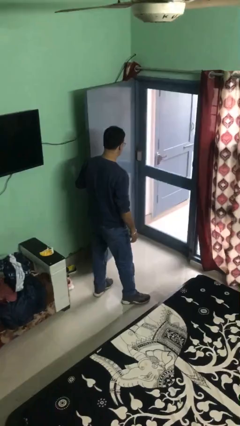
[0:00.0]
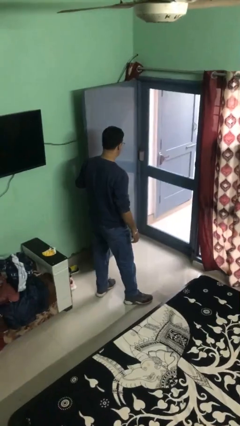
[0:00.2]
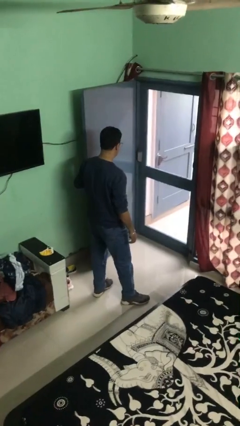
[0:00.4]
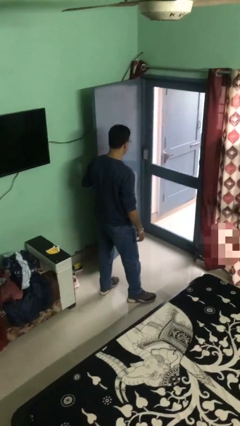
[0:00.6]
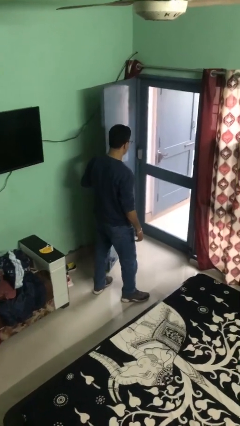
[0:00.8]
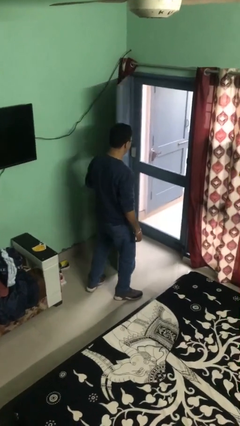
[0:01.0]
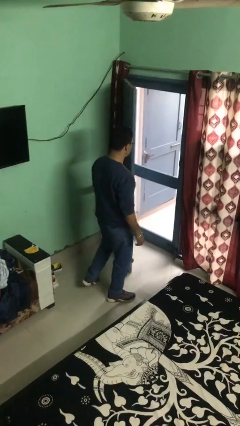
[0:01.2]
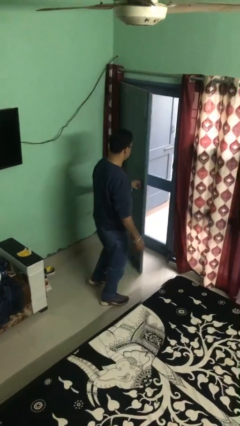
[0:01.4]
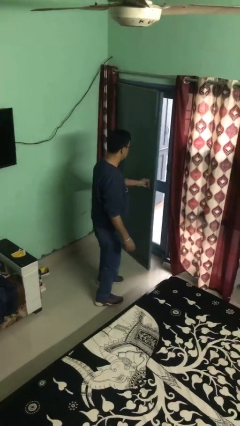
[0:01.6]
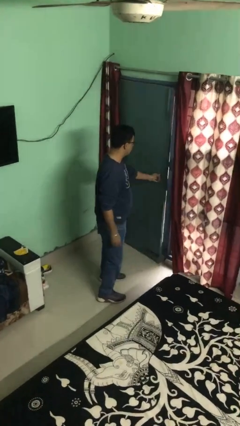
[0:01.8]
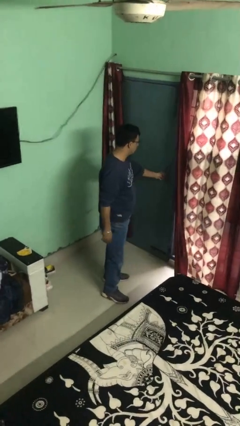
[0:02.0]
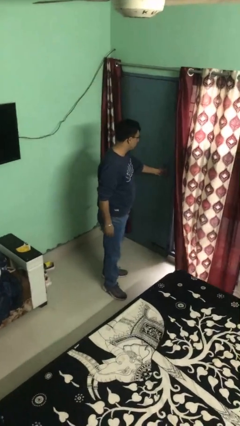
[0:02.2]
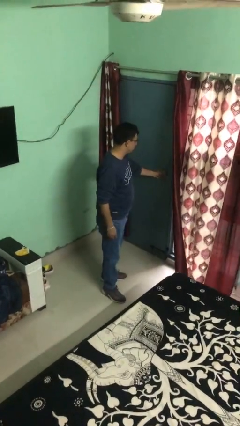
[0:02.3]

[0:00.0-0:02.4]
person closes facility door

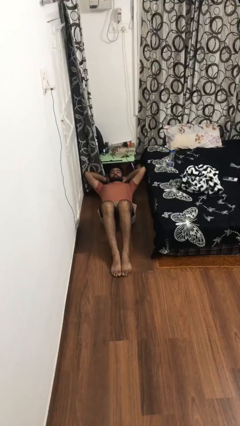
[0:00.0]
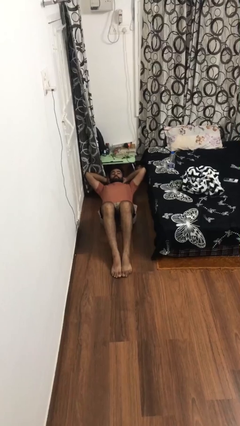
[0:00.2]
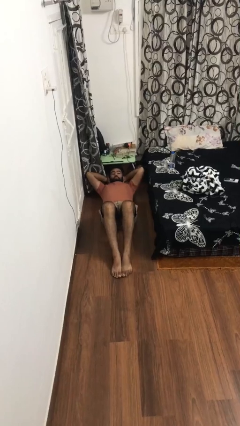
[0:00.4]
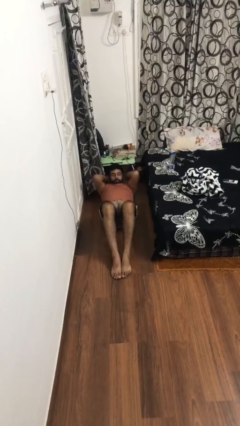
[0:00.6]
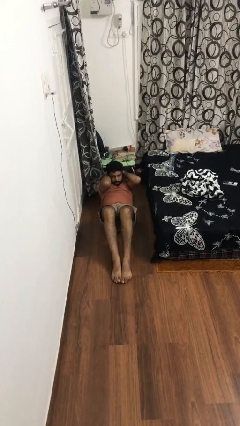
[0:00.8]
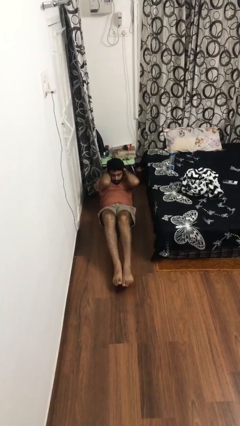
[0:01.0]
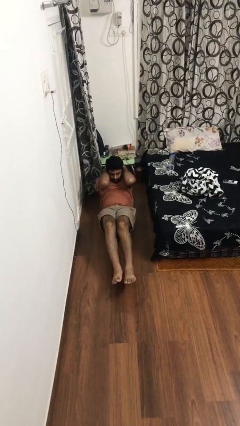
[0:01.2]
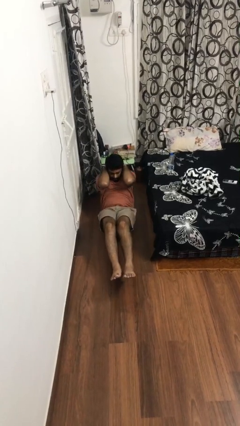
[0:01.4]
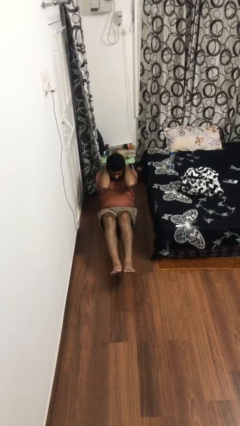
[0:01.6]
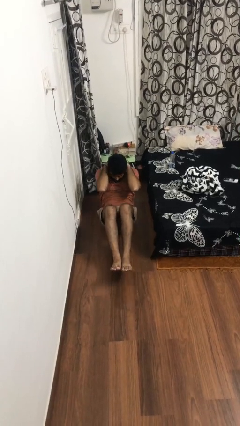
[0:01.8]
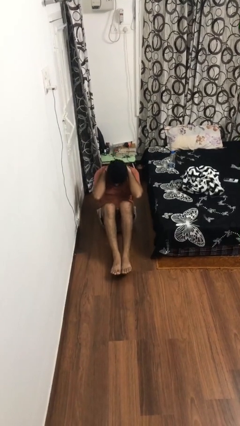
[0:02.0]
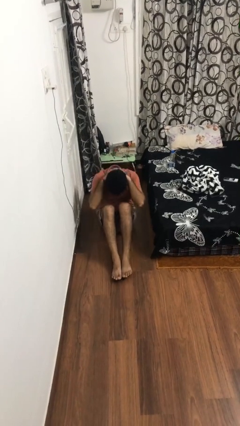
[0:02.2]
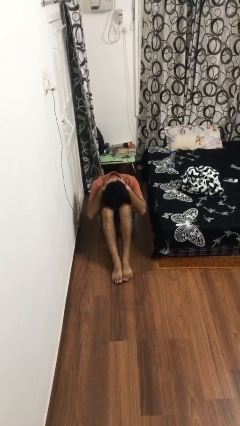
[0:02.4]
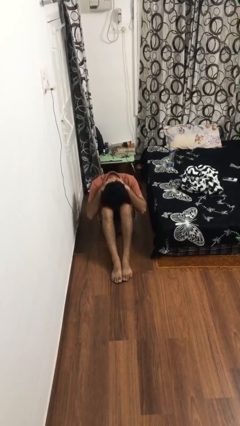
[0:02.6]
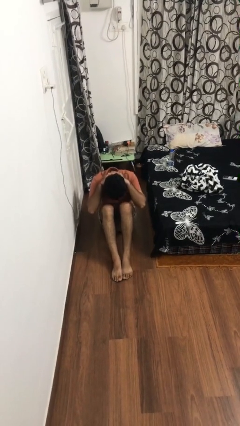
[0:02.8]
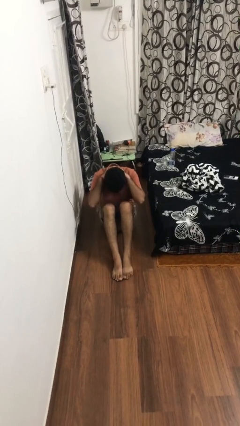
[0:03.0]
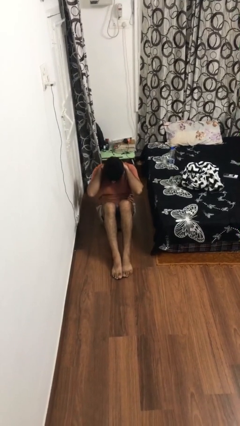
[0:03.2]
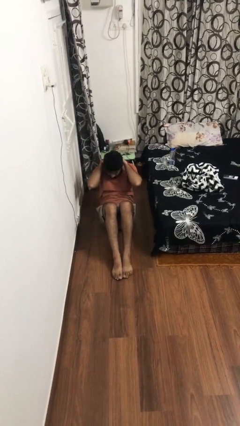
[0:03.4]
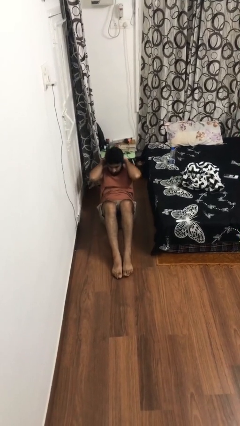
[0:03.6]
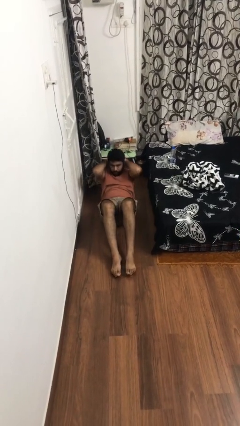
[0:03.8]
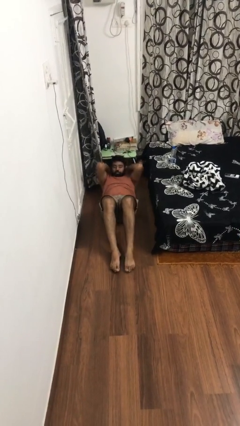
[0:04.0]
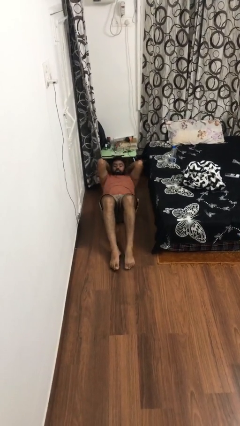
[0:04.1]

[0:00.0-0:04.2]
person exercises with situp

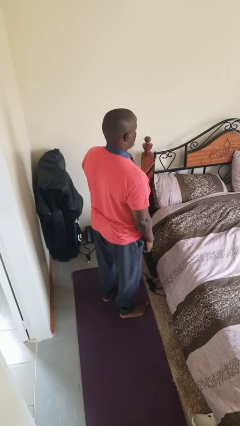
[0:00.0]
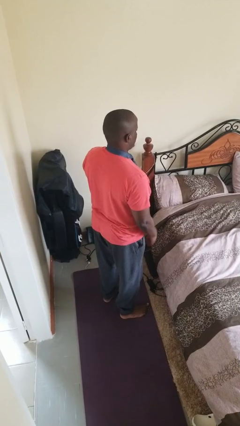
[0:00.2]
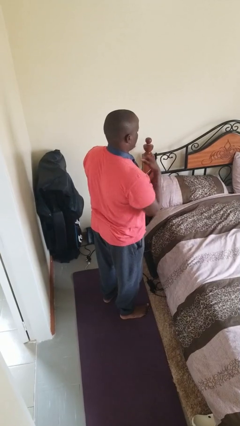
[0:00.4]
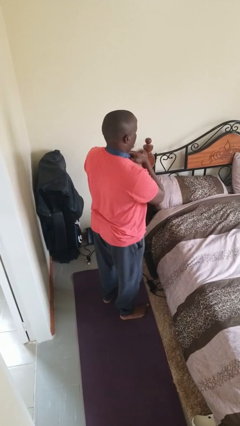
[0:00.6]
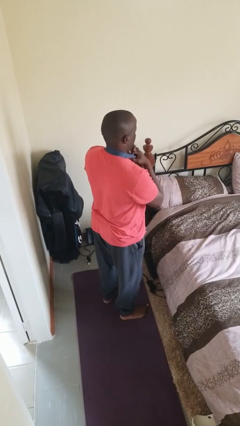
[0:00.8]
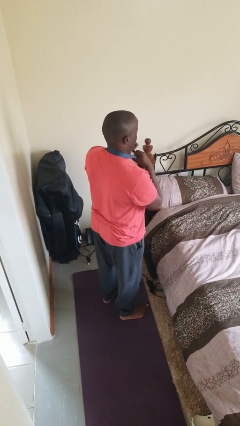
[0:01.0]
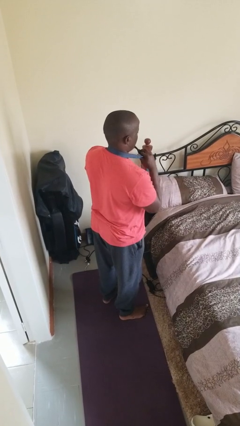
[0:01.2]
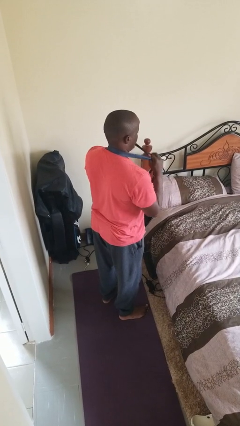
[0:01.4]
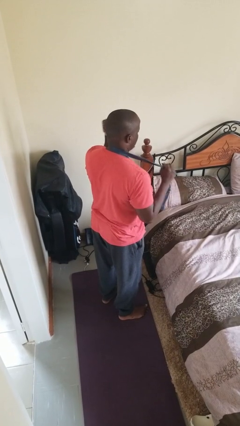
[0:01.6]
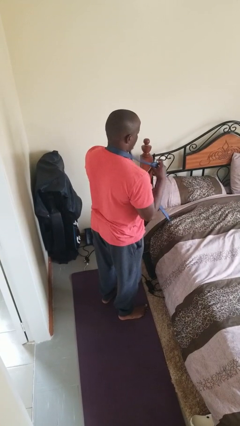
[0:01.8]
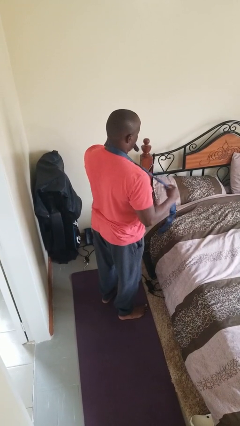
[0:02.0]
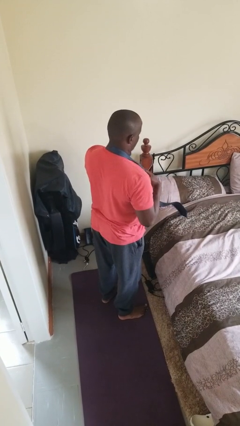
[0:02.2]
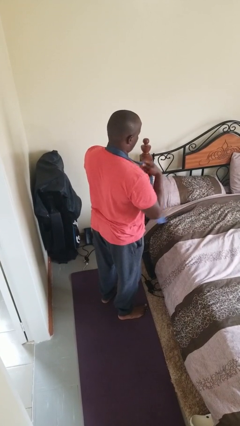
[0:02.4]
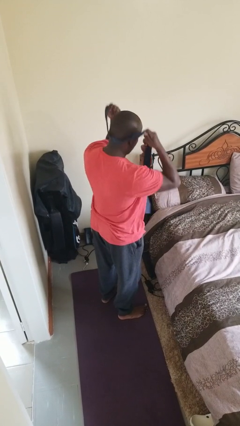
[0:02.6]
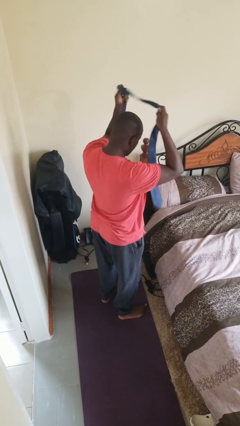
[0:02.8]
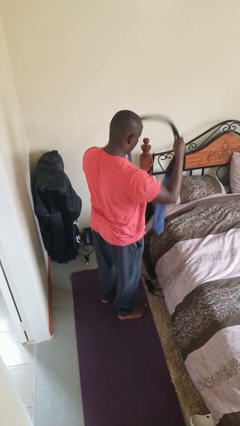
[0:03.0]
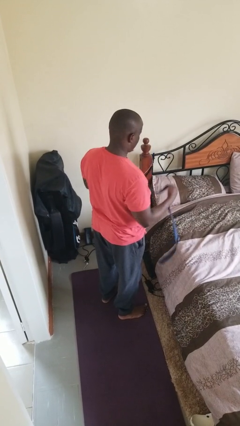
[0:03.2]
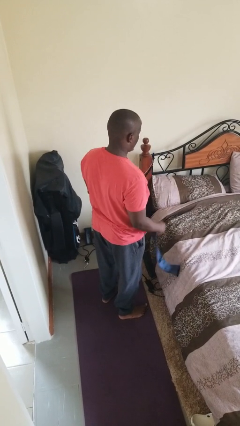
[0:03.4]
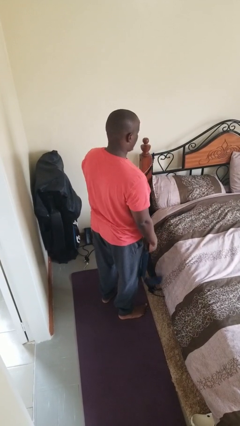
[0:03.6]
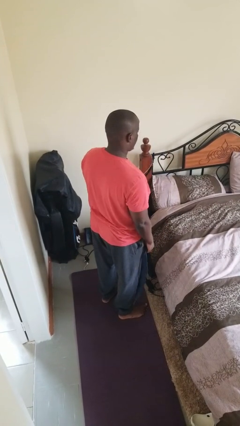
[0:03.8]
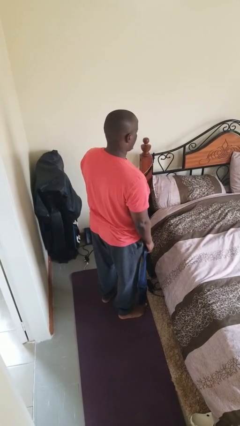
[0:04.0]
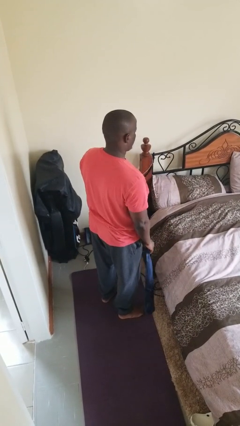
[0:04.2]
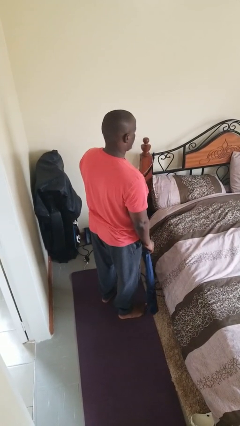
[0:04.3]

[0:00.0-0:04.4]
person takes off necktie

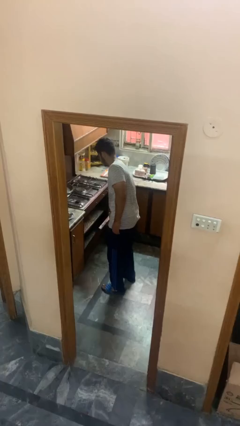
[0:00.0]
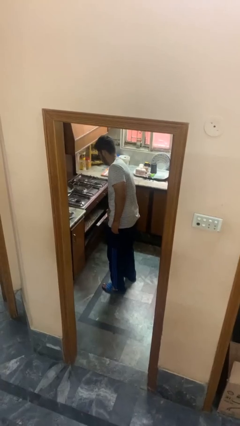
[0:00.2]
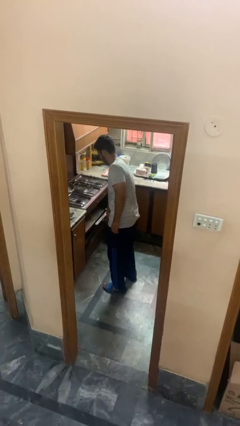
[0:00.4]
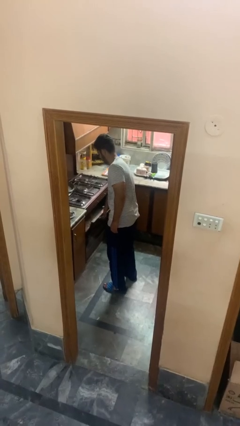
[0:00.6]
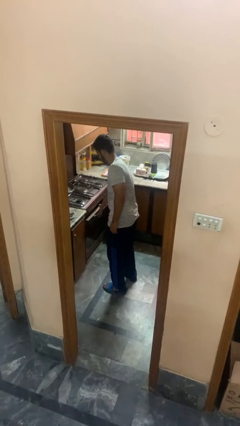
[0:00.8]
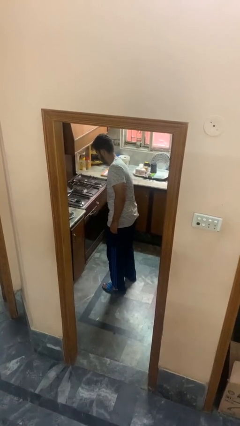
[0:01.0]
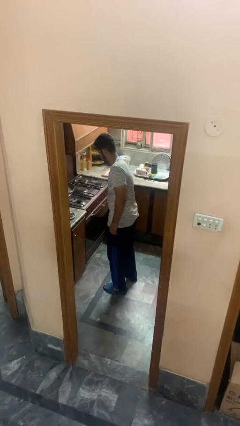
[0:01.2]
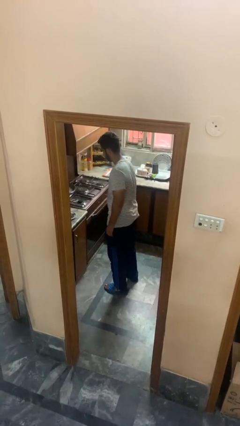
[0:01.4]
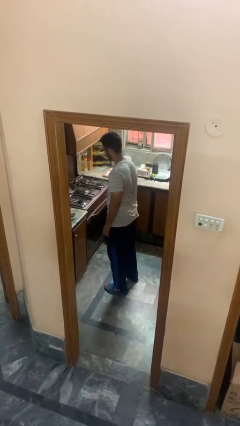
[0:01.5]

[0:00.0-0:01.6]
person closes oven door

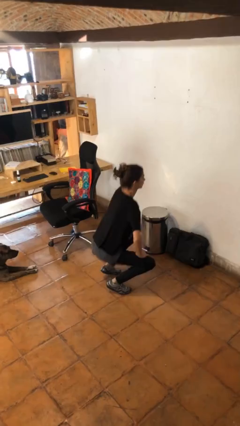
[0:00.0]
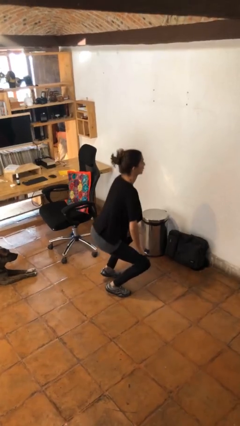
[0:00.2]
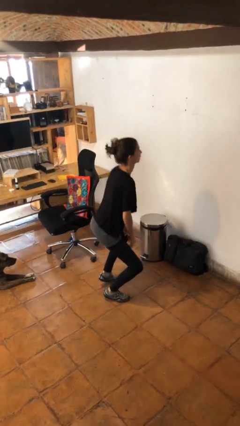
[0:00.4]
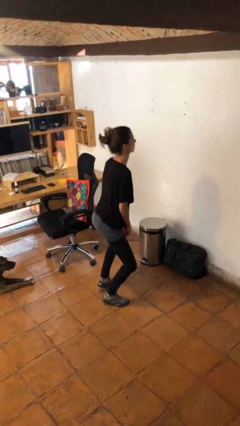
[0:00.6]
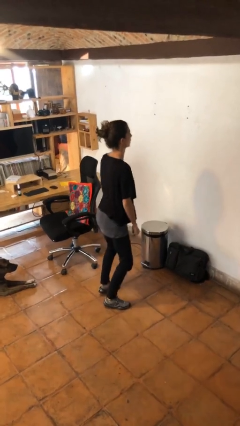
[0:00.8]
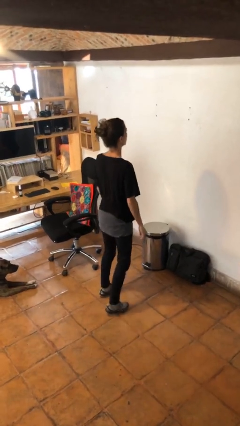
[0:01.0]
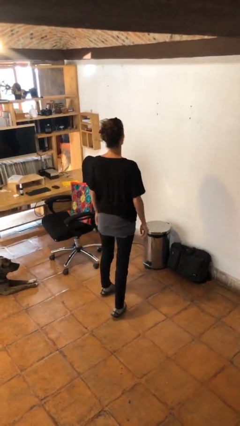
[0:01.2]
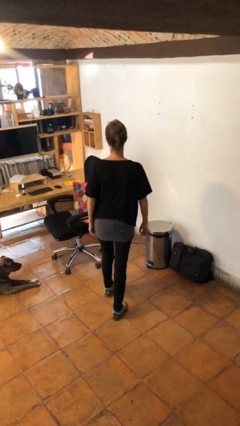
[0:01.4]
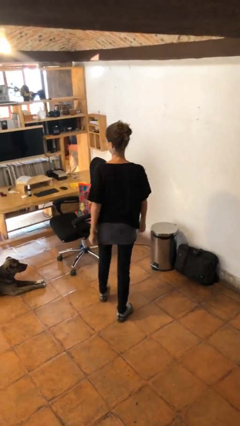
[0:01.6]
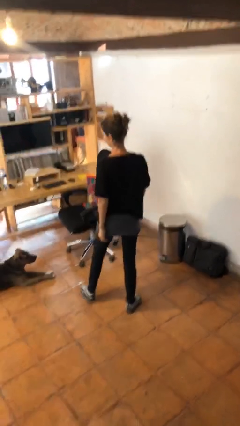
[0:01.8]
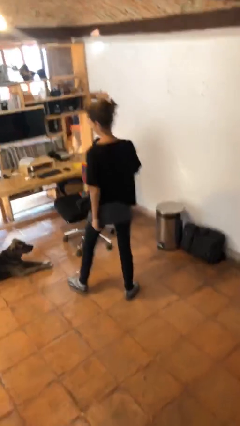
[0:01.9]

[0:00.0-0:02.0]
person stands up

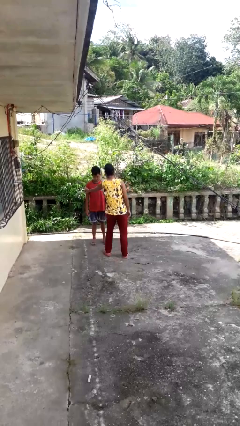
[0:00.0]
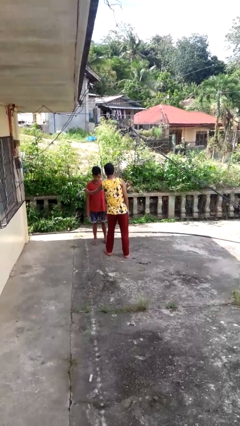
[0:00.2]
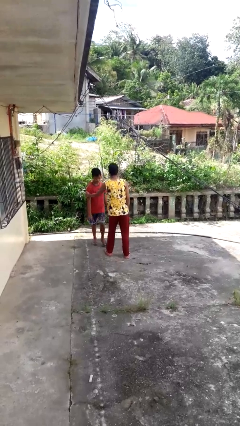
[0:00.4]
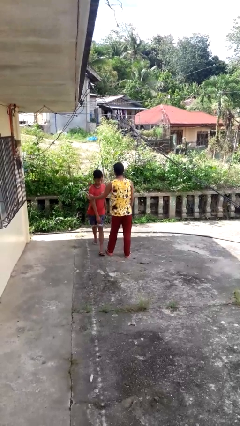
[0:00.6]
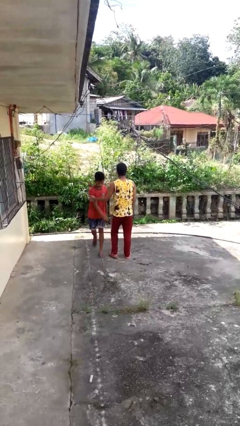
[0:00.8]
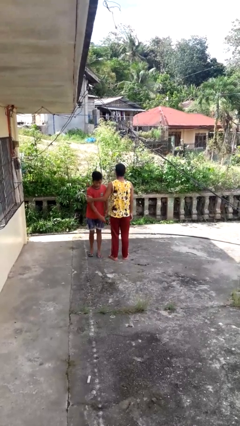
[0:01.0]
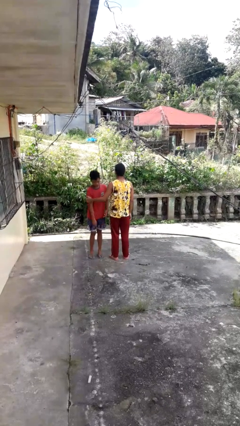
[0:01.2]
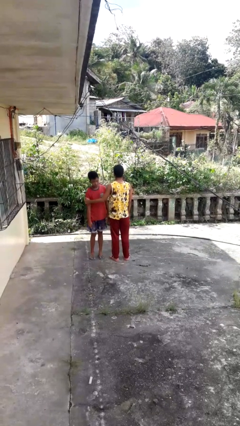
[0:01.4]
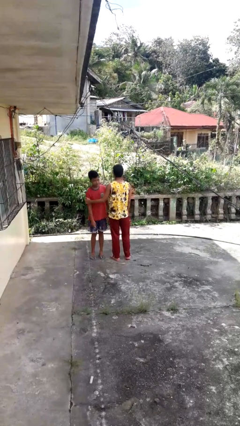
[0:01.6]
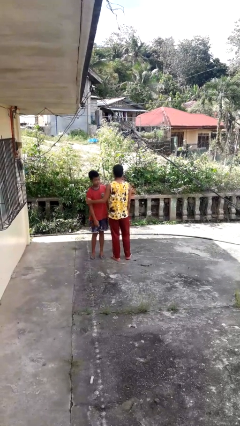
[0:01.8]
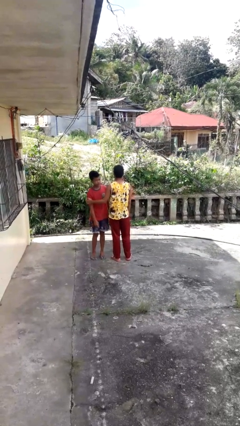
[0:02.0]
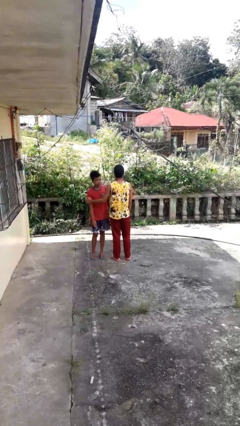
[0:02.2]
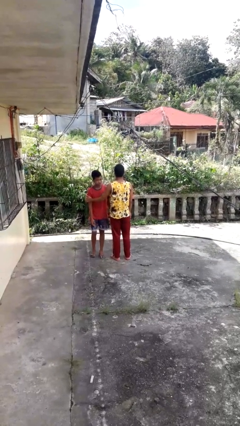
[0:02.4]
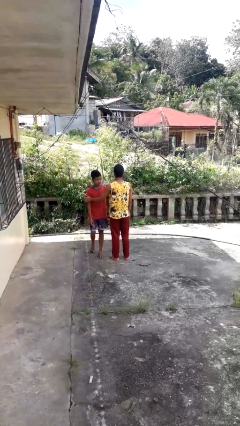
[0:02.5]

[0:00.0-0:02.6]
person grabs person by bicep
